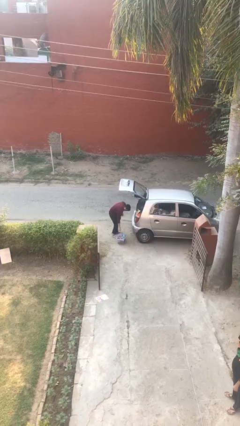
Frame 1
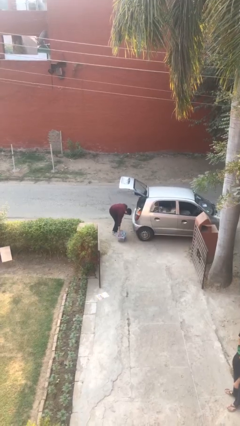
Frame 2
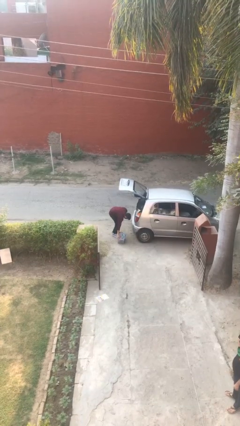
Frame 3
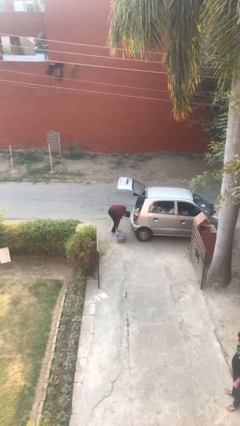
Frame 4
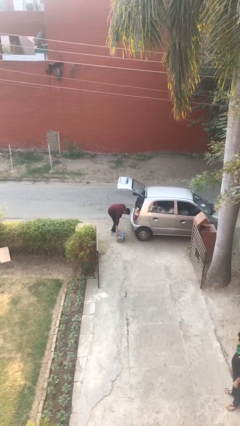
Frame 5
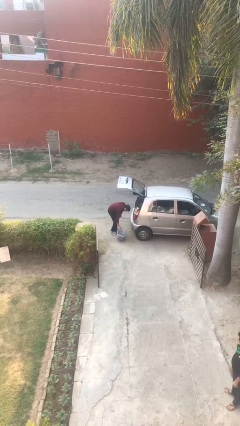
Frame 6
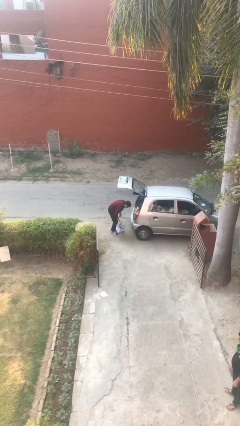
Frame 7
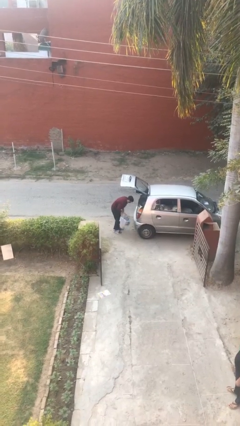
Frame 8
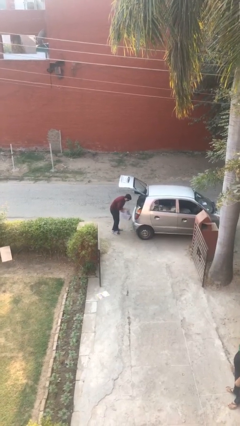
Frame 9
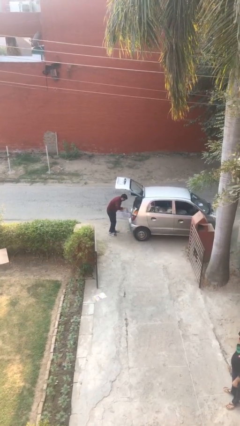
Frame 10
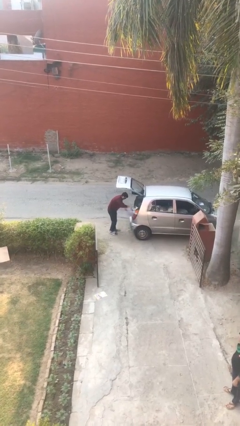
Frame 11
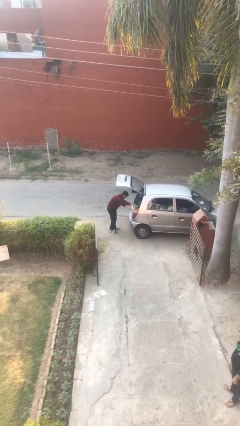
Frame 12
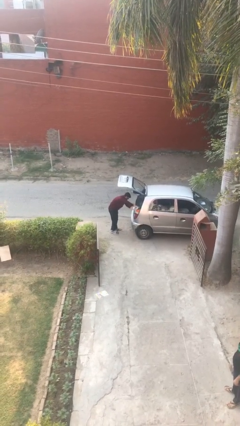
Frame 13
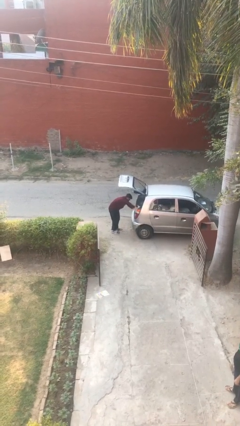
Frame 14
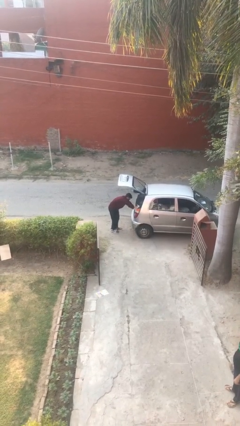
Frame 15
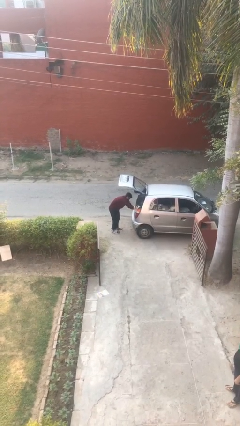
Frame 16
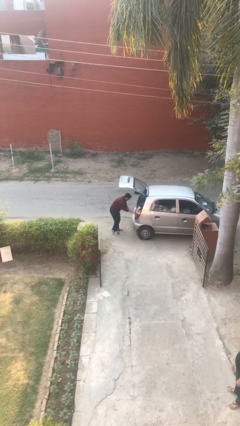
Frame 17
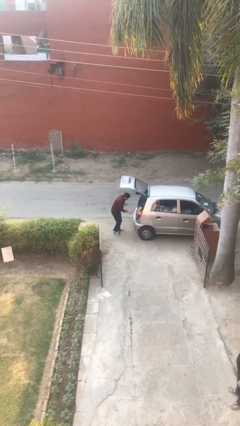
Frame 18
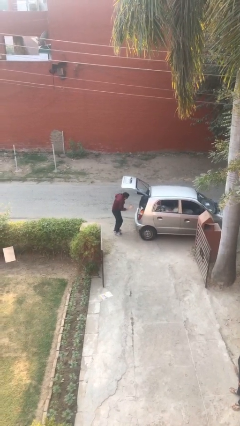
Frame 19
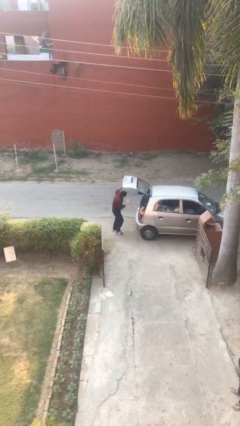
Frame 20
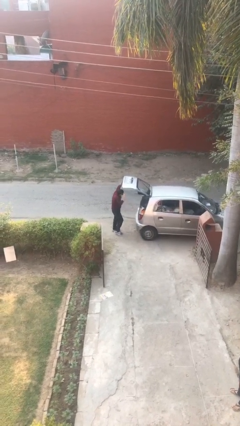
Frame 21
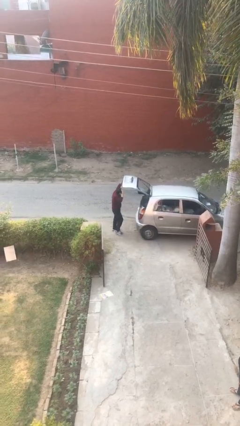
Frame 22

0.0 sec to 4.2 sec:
person loads car

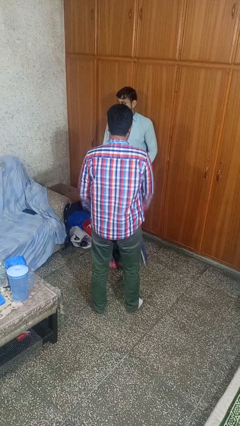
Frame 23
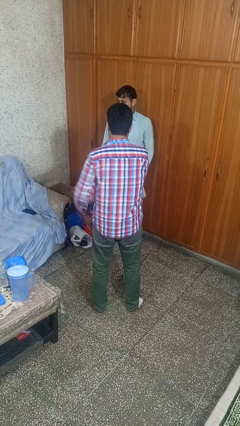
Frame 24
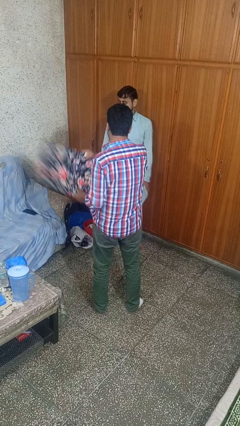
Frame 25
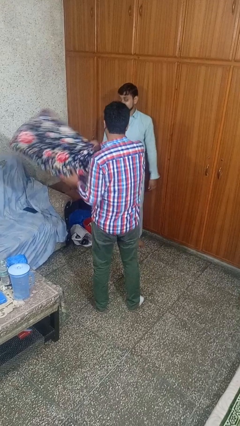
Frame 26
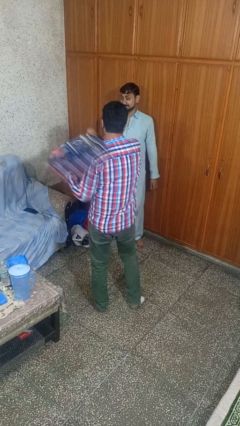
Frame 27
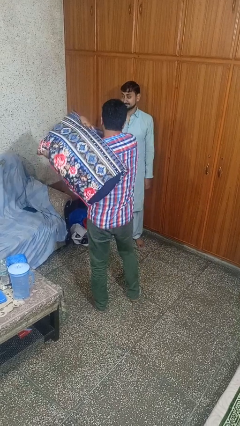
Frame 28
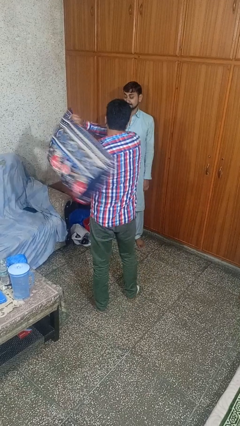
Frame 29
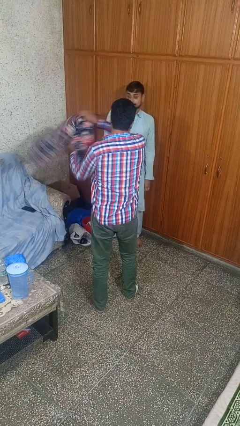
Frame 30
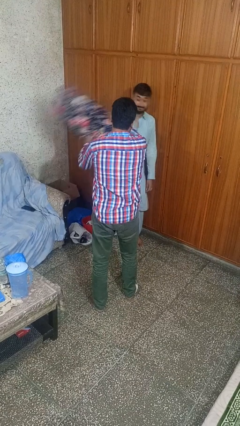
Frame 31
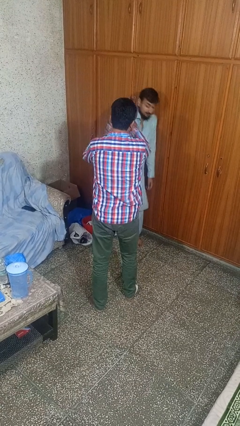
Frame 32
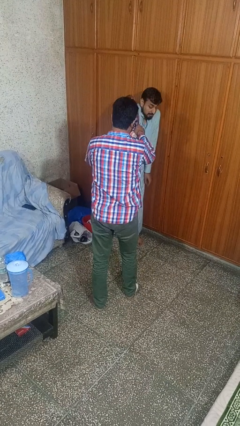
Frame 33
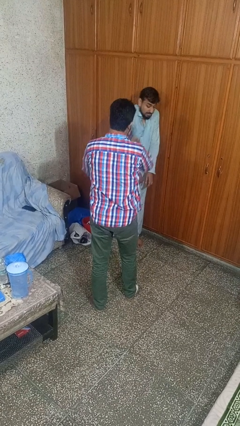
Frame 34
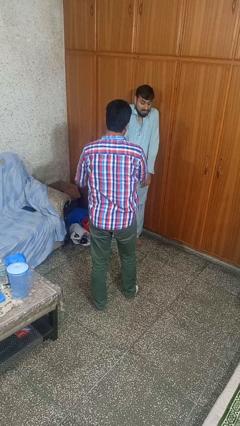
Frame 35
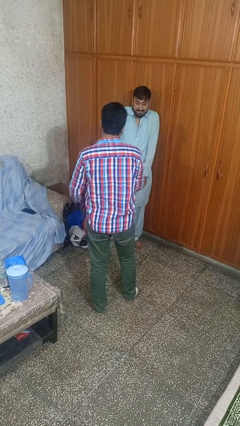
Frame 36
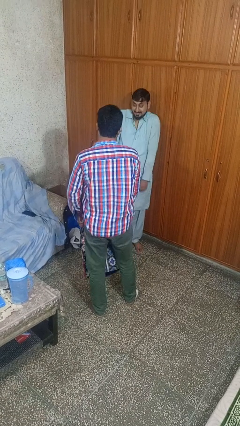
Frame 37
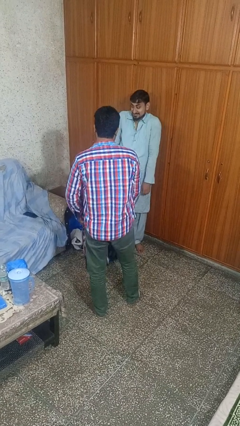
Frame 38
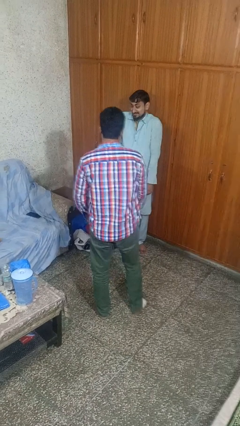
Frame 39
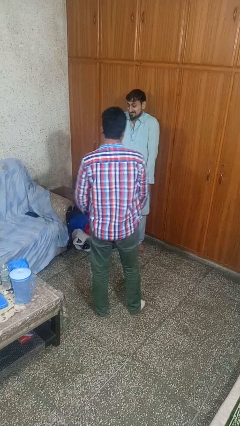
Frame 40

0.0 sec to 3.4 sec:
person hits person with pillow

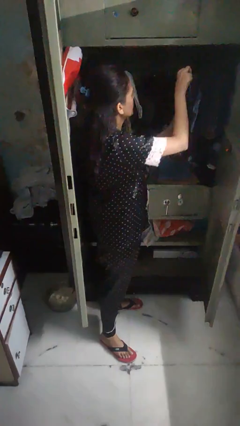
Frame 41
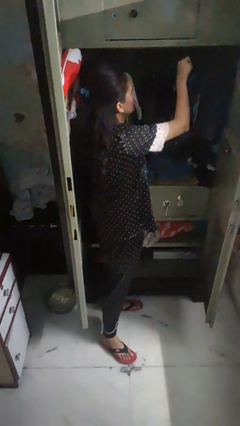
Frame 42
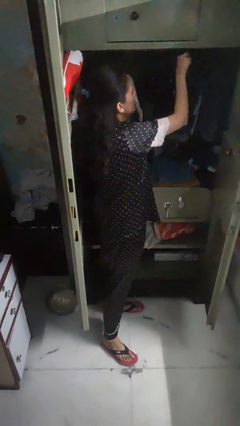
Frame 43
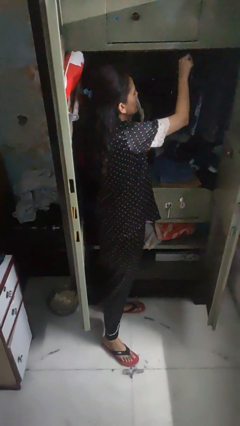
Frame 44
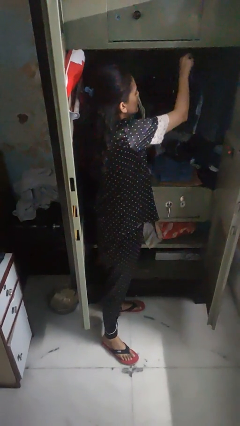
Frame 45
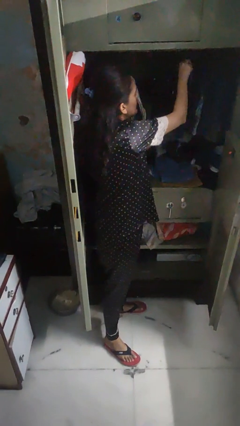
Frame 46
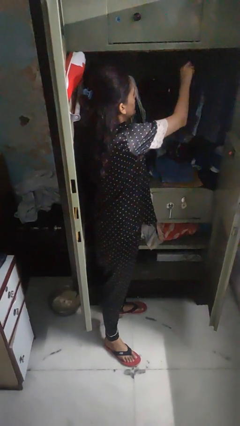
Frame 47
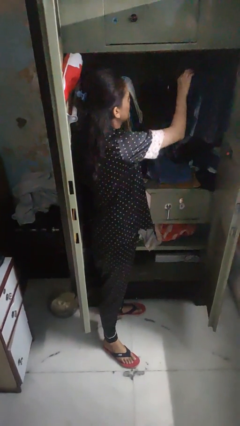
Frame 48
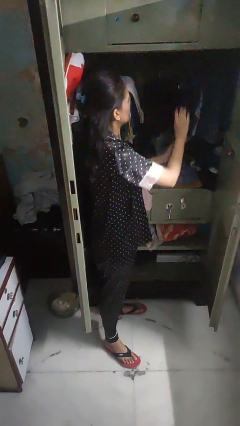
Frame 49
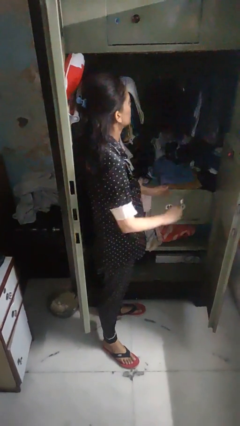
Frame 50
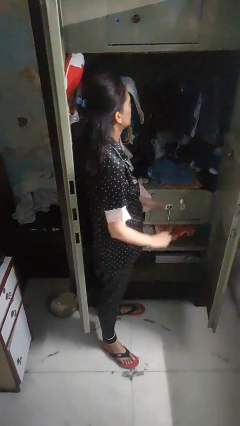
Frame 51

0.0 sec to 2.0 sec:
person puts clothes into closet

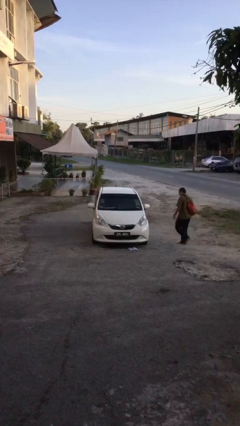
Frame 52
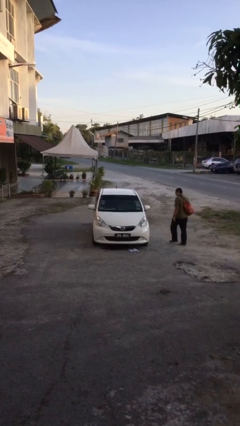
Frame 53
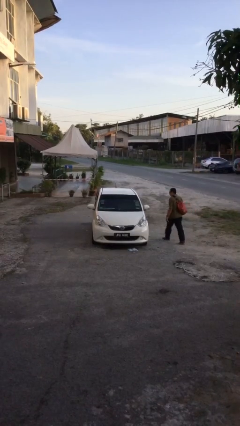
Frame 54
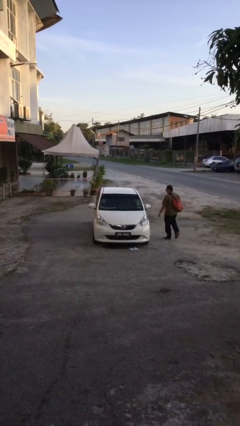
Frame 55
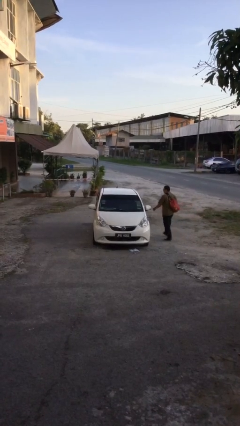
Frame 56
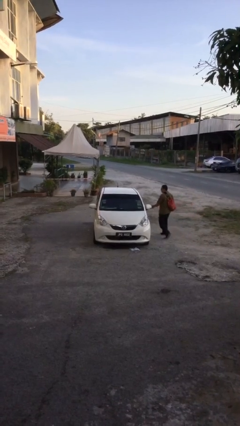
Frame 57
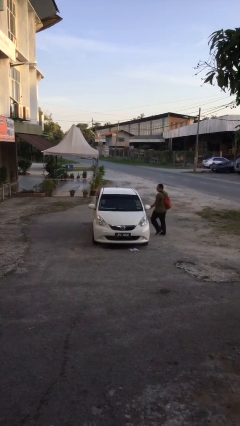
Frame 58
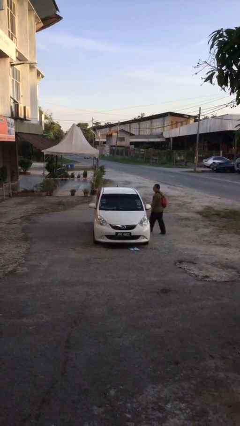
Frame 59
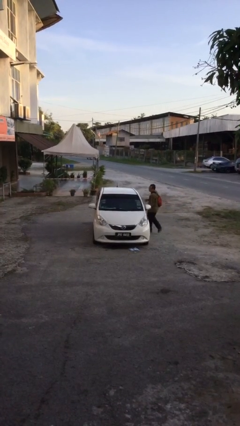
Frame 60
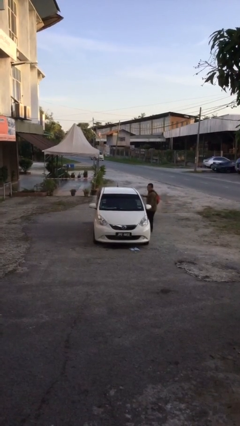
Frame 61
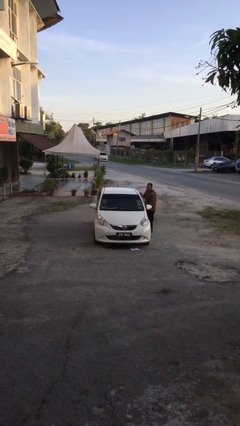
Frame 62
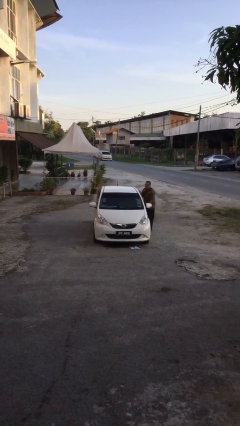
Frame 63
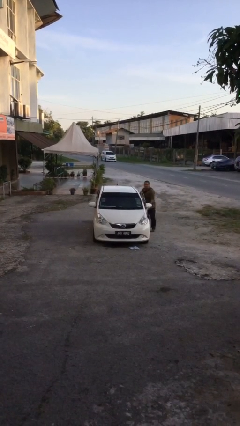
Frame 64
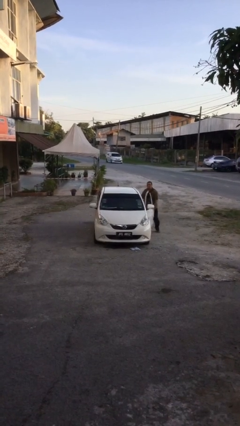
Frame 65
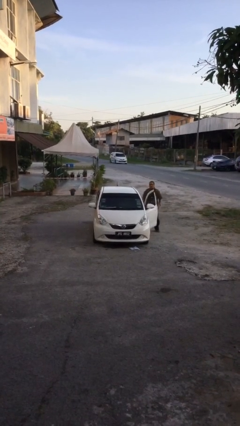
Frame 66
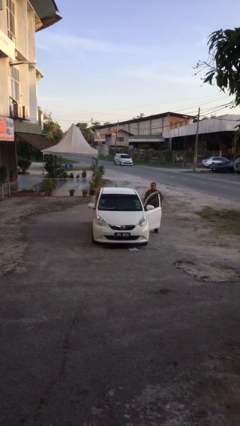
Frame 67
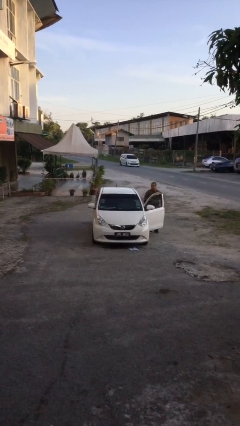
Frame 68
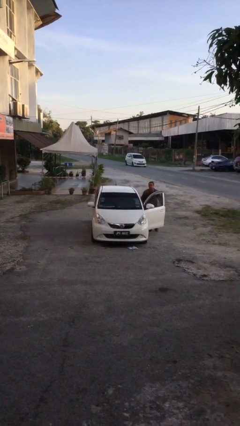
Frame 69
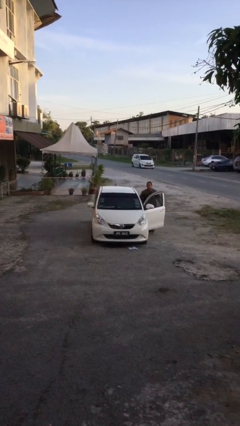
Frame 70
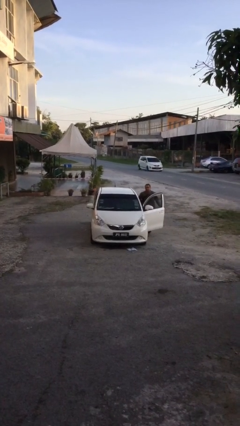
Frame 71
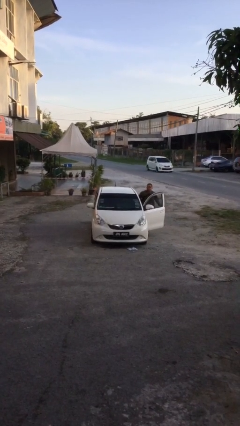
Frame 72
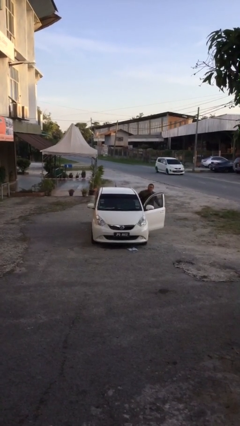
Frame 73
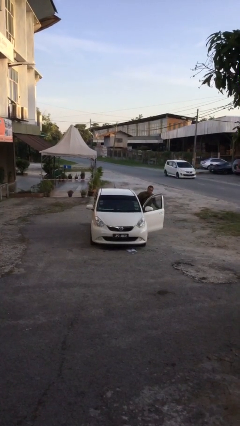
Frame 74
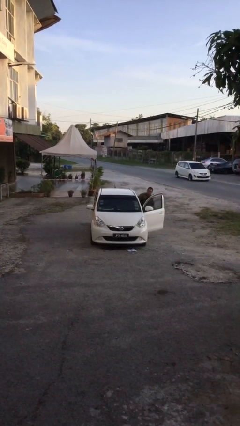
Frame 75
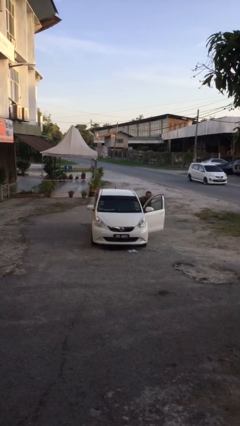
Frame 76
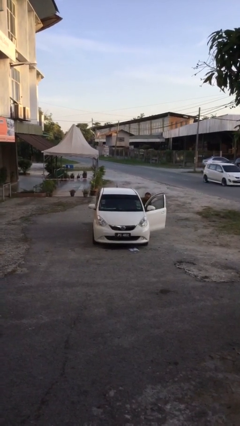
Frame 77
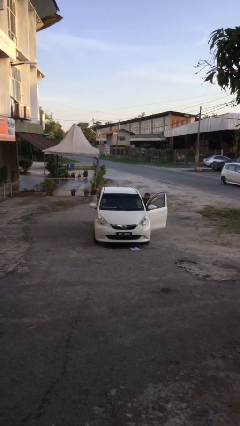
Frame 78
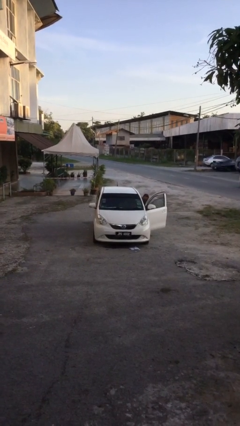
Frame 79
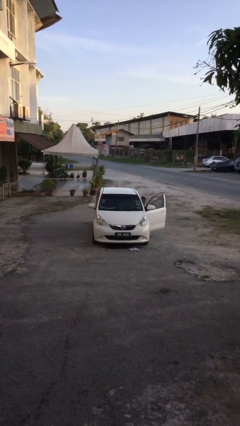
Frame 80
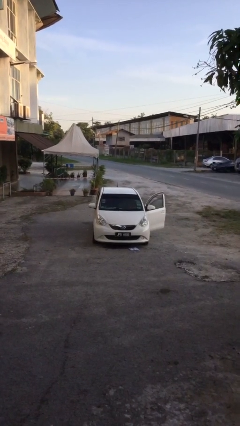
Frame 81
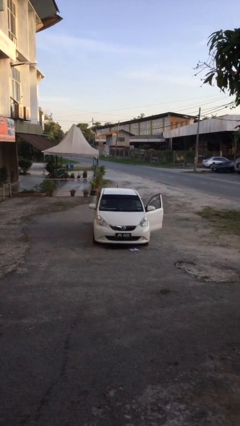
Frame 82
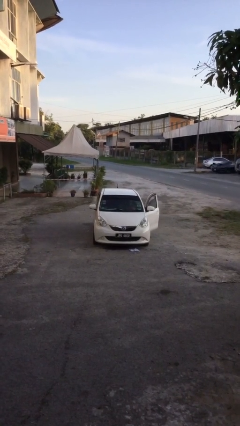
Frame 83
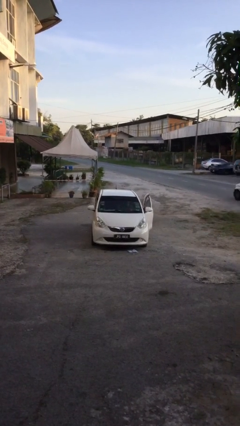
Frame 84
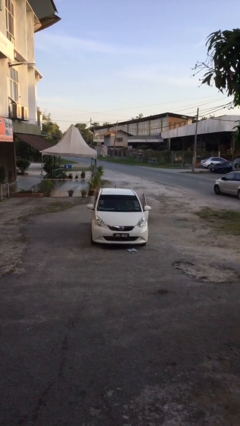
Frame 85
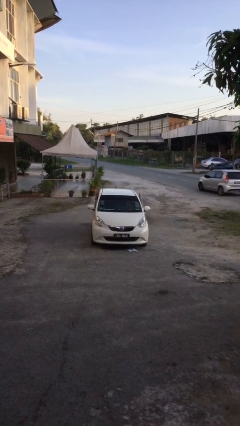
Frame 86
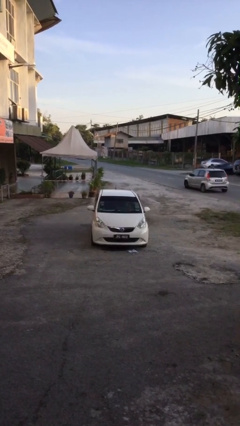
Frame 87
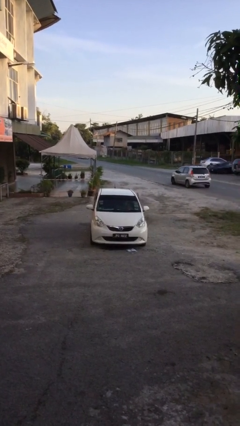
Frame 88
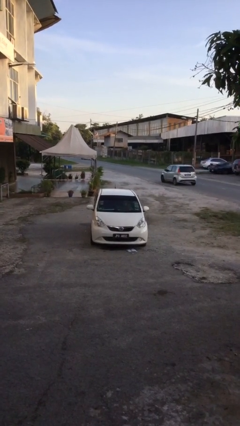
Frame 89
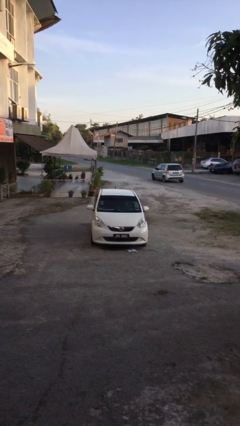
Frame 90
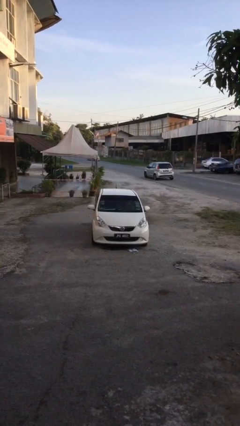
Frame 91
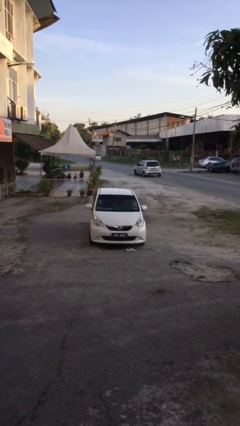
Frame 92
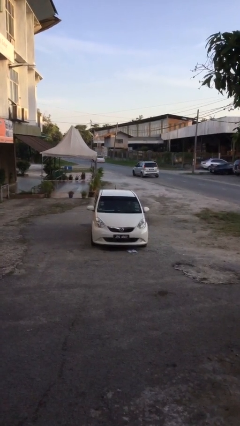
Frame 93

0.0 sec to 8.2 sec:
car picks up person
